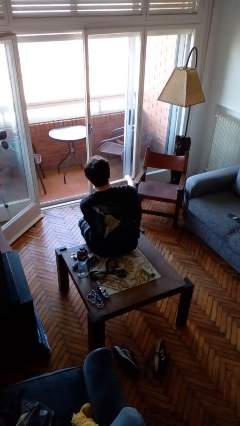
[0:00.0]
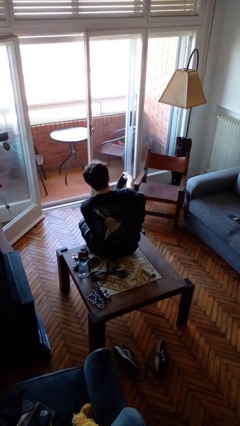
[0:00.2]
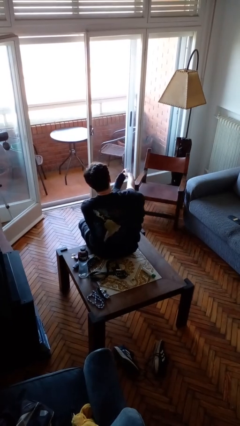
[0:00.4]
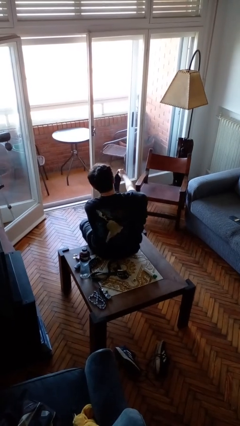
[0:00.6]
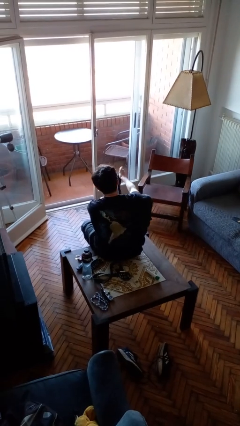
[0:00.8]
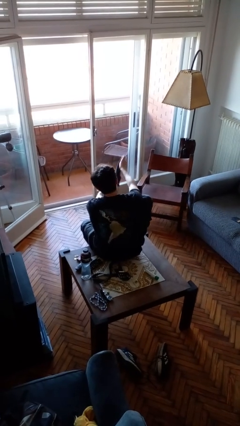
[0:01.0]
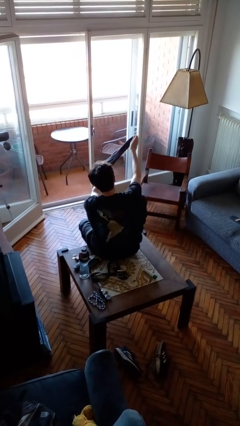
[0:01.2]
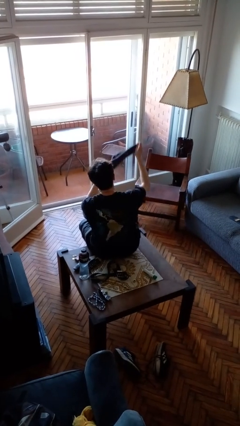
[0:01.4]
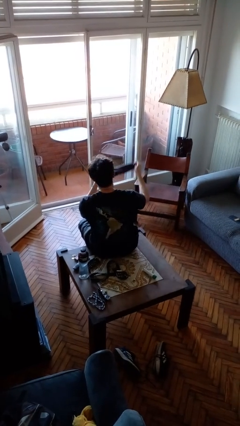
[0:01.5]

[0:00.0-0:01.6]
person takes off socks

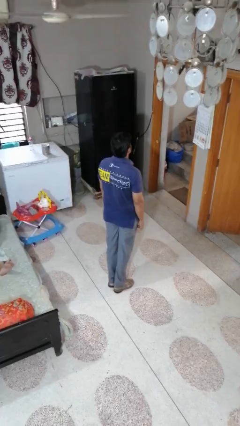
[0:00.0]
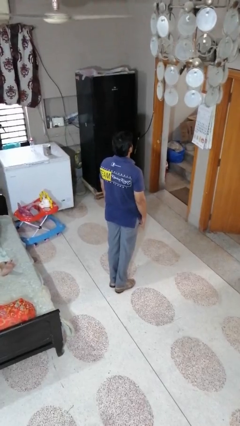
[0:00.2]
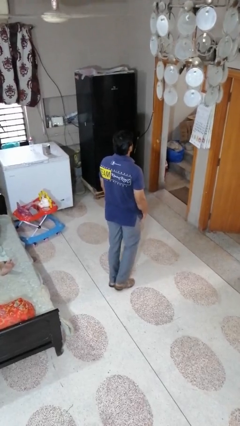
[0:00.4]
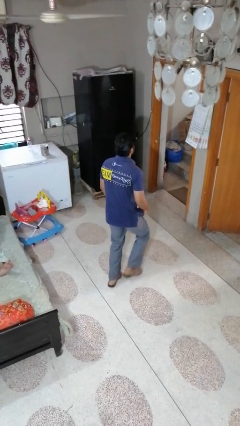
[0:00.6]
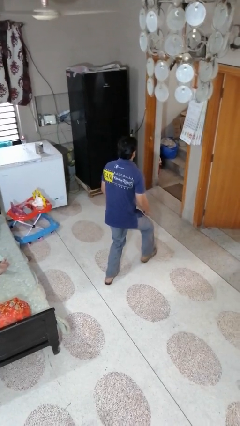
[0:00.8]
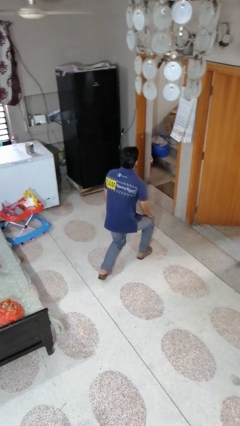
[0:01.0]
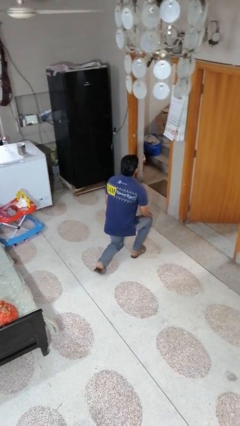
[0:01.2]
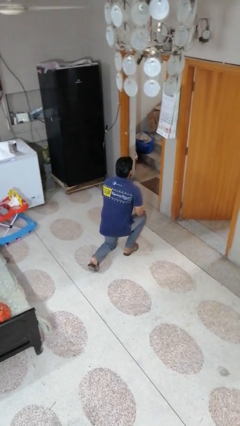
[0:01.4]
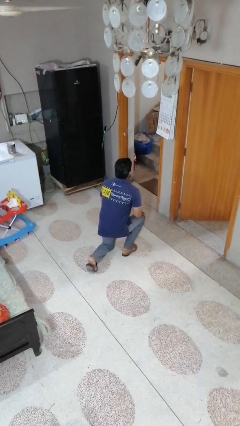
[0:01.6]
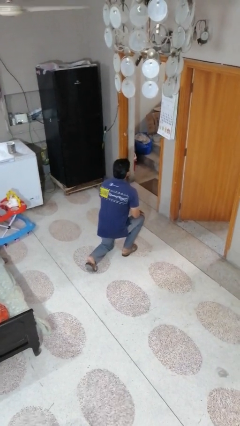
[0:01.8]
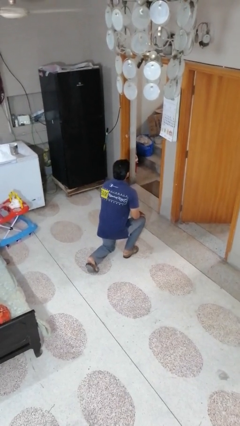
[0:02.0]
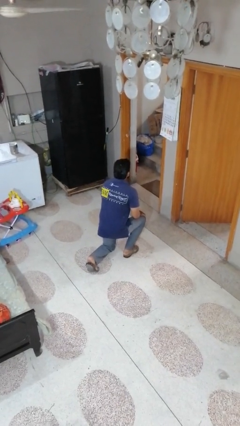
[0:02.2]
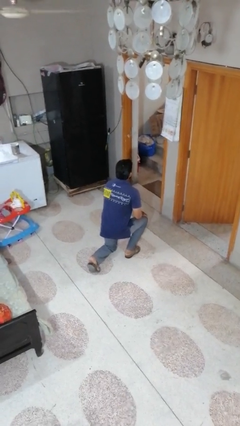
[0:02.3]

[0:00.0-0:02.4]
person kneels

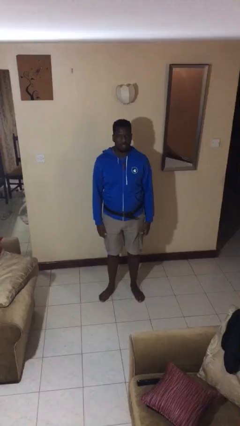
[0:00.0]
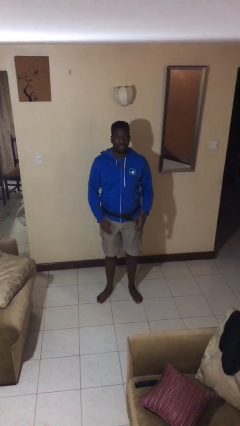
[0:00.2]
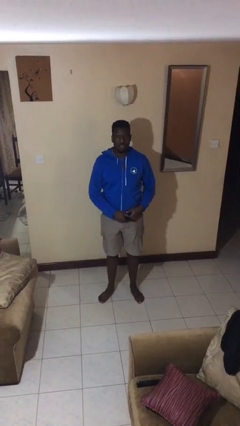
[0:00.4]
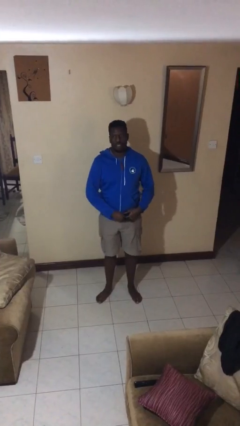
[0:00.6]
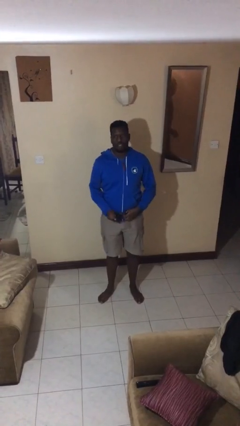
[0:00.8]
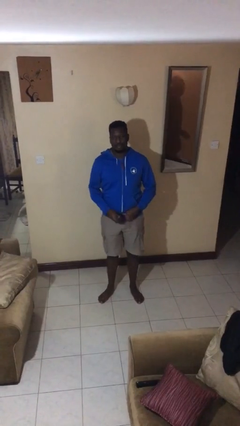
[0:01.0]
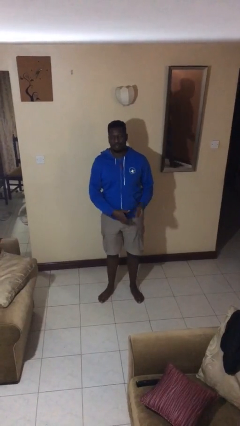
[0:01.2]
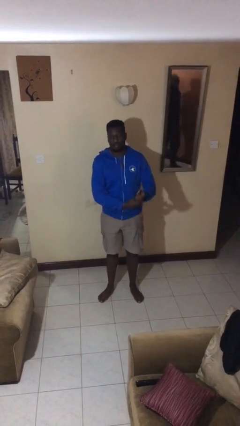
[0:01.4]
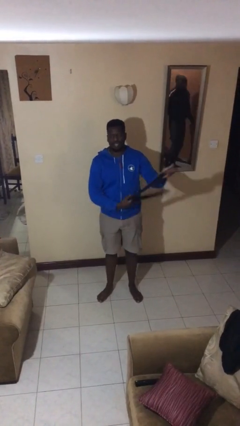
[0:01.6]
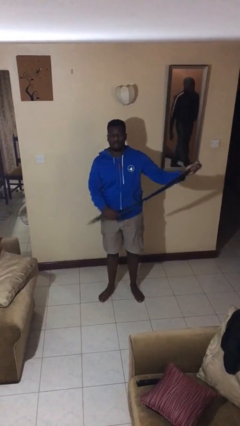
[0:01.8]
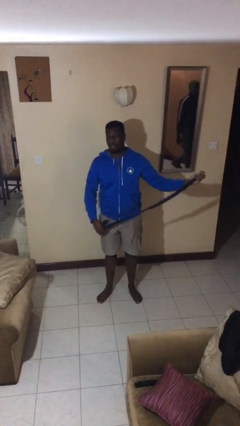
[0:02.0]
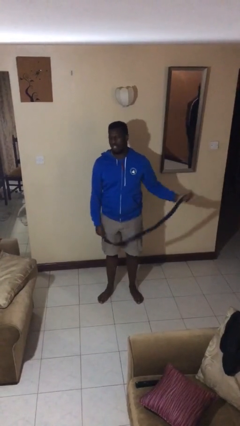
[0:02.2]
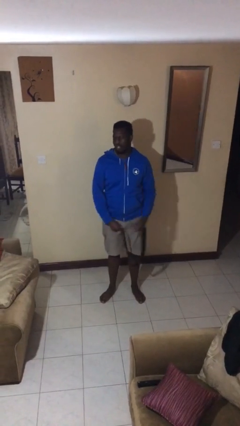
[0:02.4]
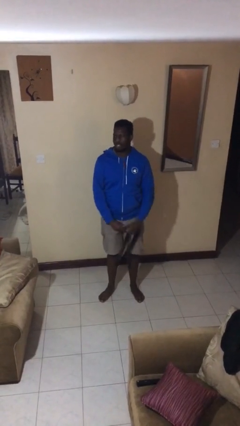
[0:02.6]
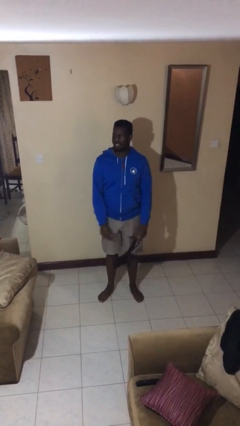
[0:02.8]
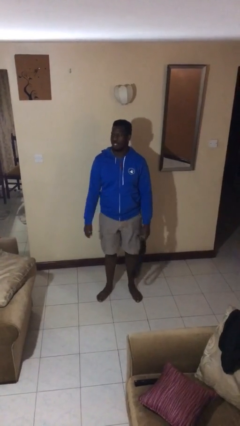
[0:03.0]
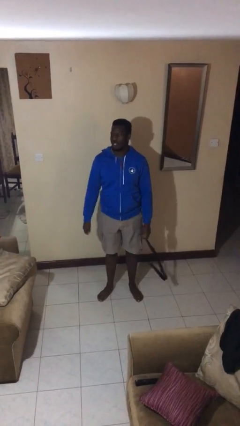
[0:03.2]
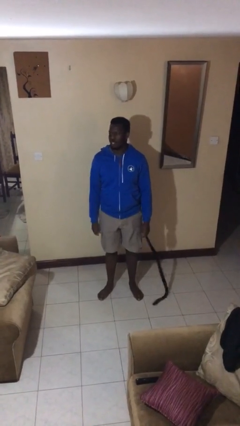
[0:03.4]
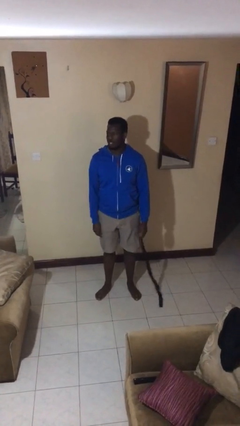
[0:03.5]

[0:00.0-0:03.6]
person takes off belt

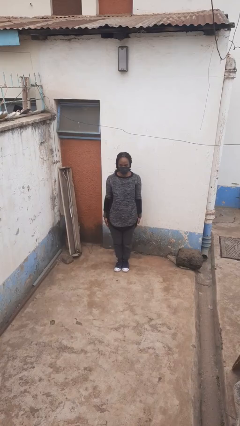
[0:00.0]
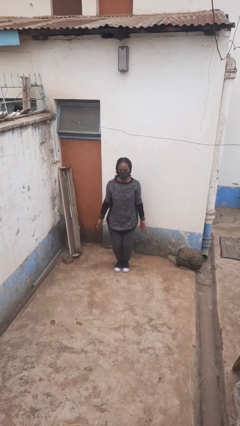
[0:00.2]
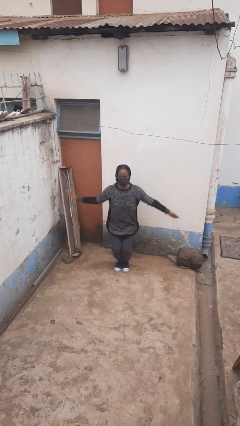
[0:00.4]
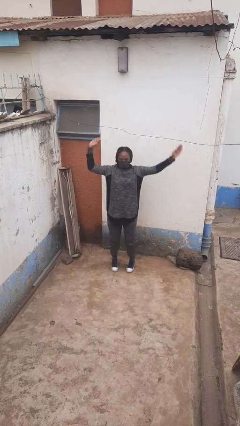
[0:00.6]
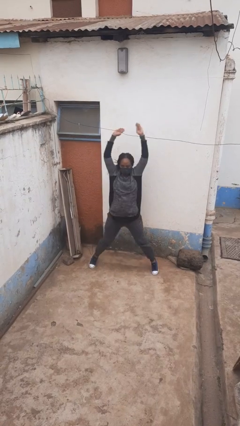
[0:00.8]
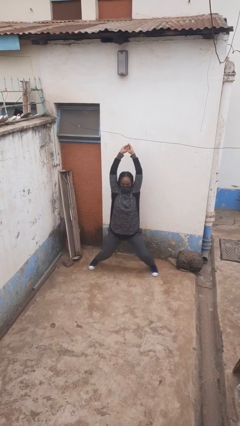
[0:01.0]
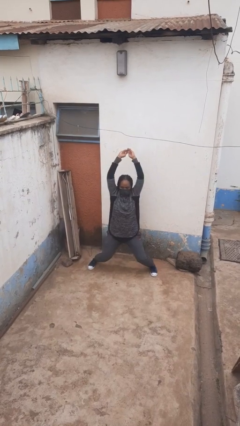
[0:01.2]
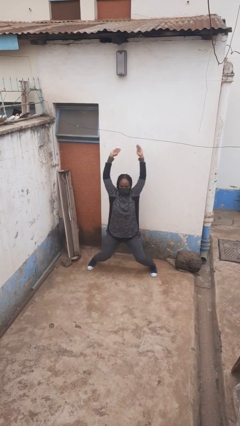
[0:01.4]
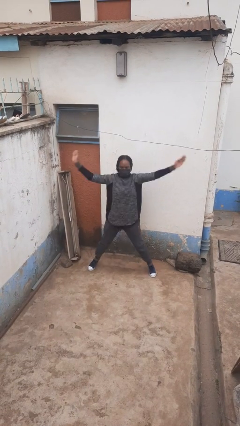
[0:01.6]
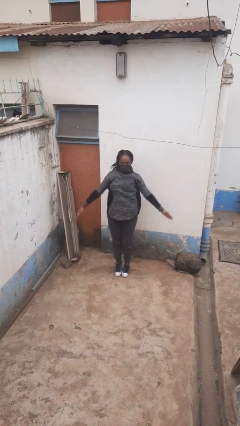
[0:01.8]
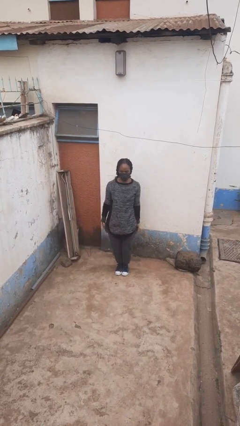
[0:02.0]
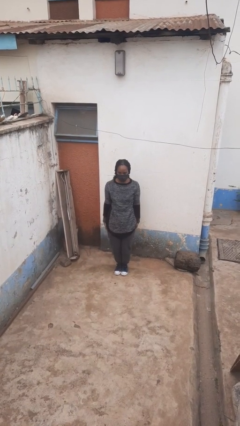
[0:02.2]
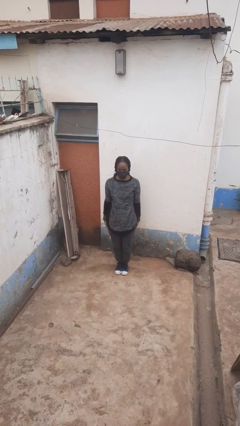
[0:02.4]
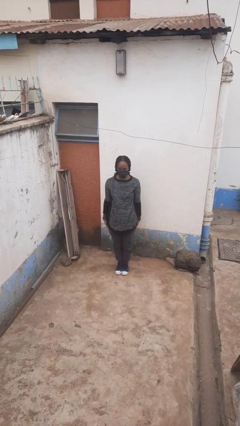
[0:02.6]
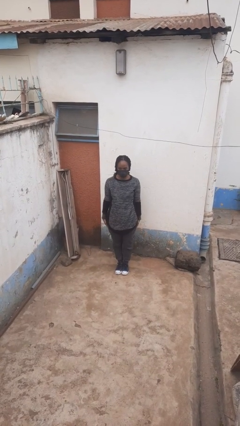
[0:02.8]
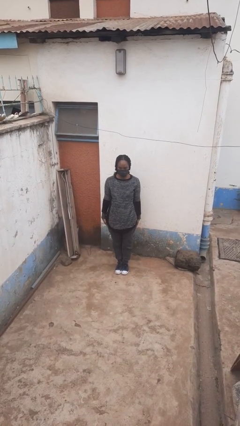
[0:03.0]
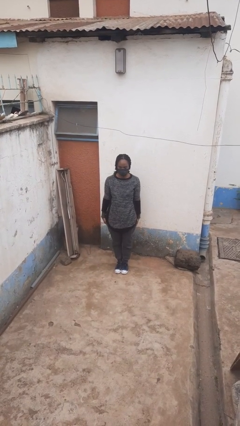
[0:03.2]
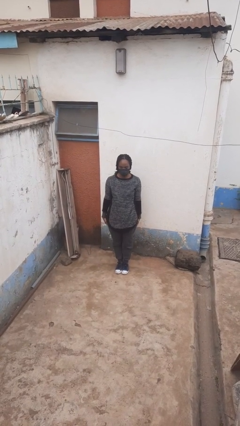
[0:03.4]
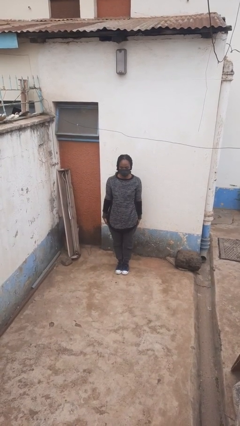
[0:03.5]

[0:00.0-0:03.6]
person exercises with jumping jacks

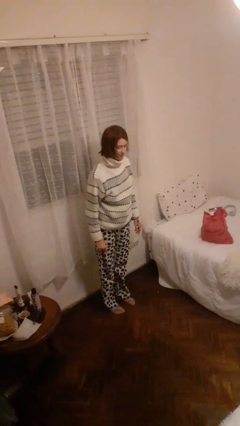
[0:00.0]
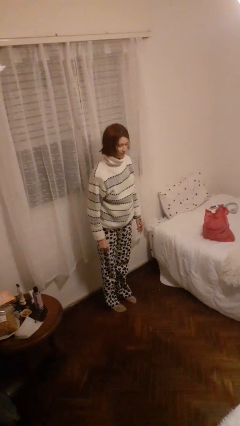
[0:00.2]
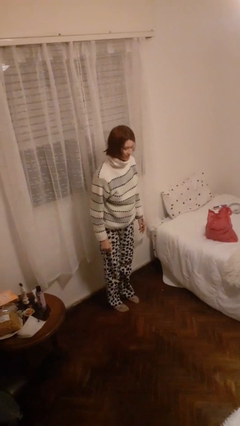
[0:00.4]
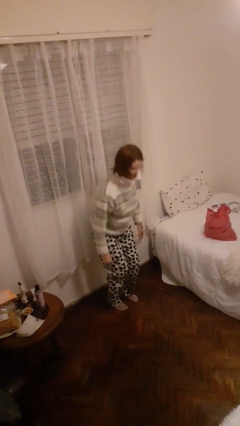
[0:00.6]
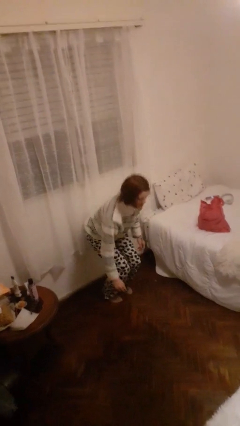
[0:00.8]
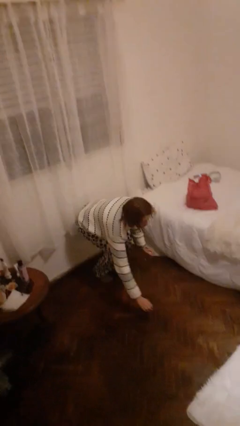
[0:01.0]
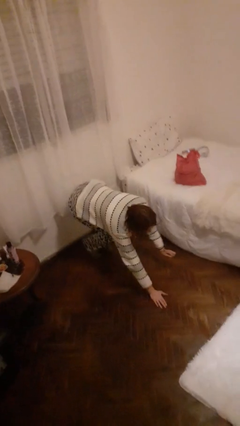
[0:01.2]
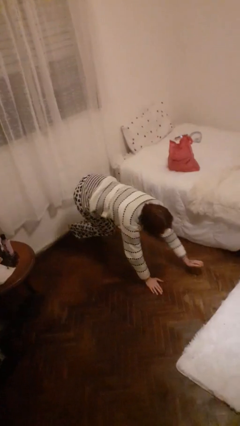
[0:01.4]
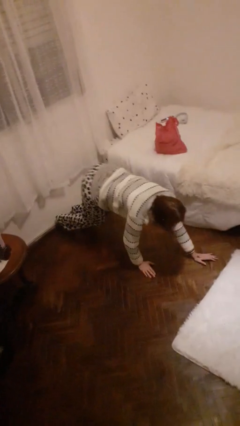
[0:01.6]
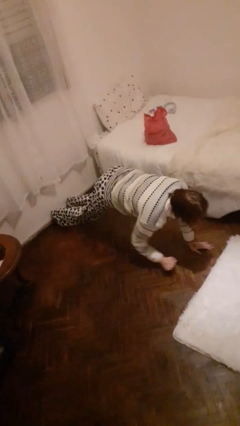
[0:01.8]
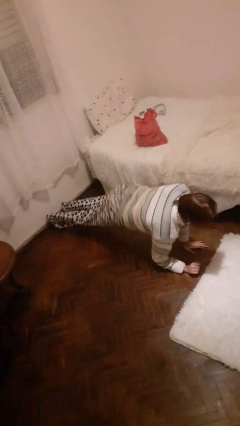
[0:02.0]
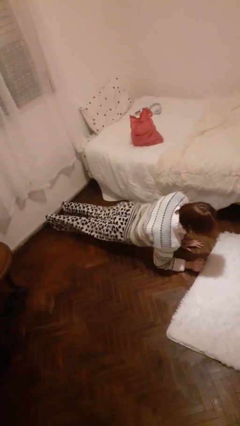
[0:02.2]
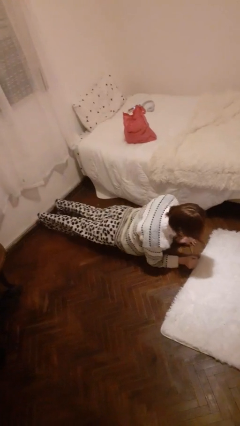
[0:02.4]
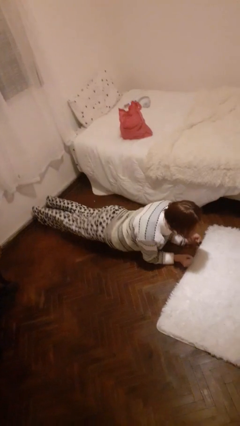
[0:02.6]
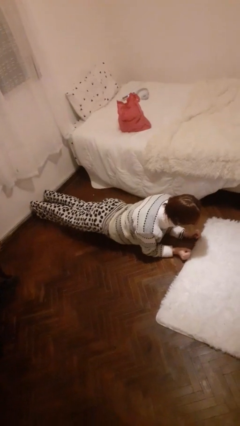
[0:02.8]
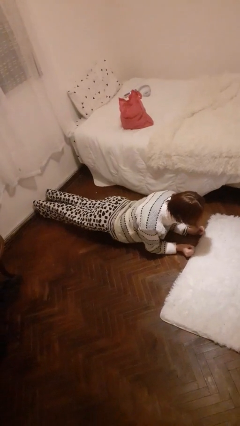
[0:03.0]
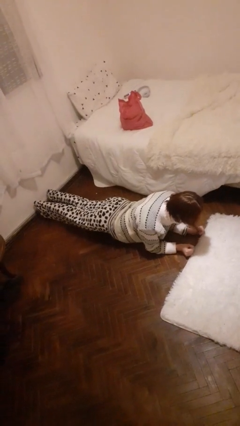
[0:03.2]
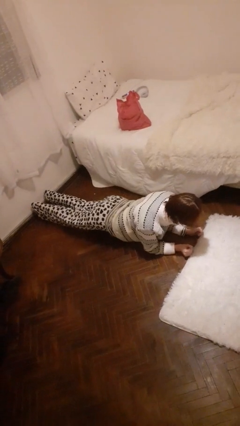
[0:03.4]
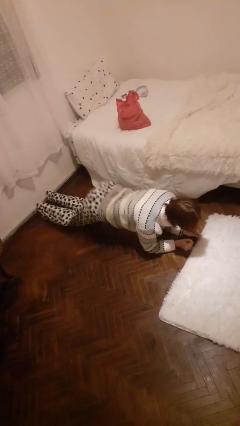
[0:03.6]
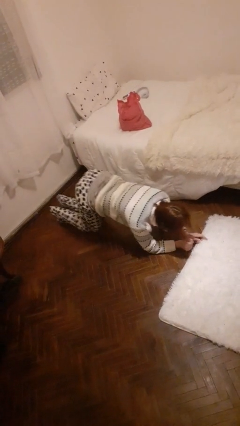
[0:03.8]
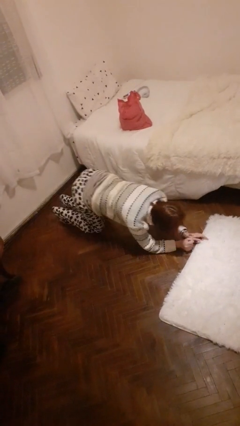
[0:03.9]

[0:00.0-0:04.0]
person exercises with plank

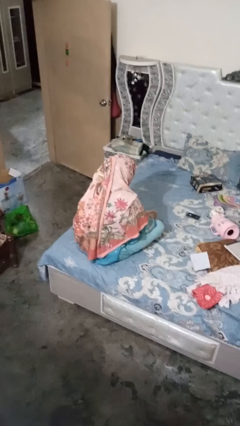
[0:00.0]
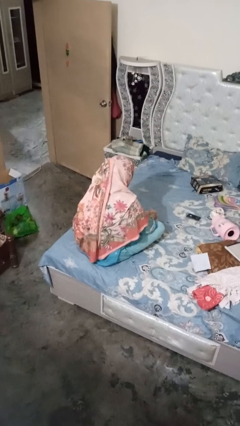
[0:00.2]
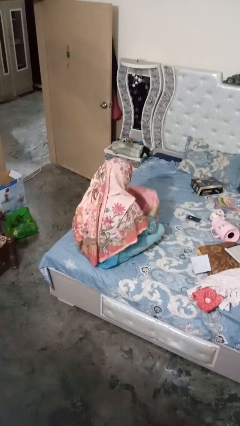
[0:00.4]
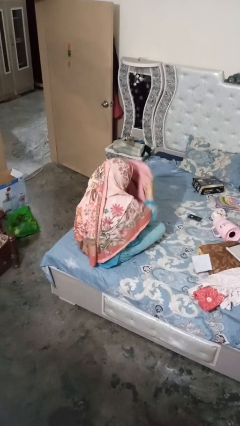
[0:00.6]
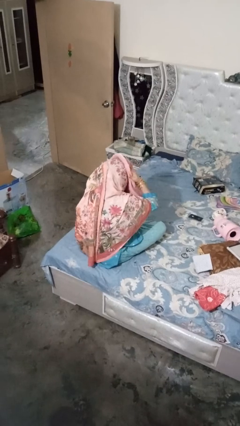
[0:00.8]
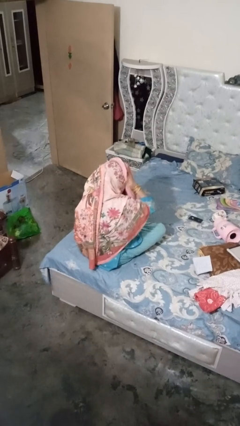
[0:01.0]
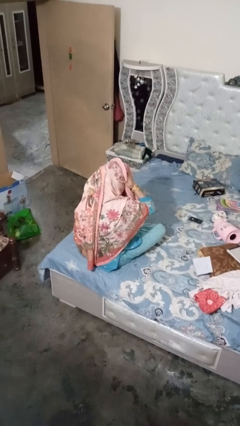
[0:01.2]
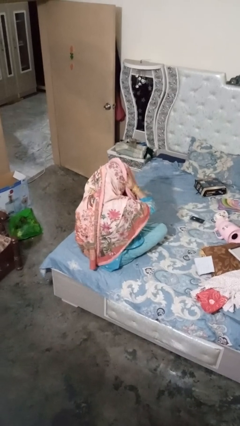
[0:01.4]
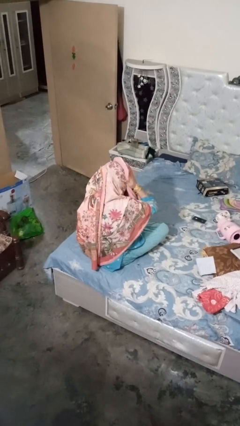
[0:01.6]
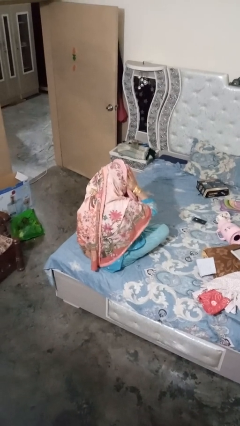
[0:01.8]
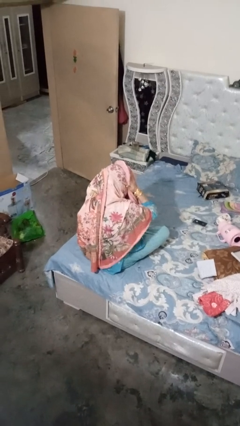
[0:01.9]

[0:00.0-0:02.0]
person dries hair with hairdryer
